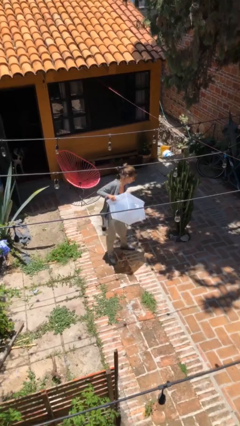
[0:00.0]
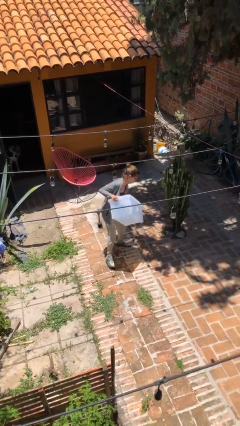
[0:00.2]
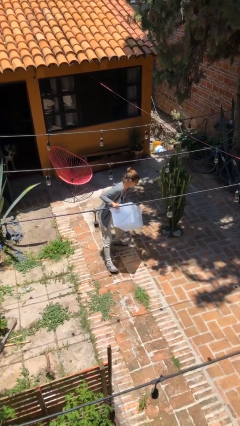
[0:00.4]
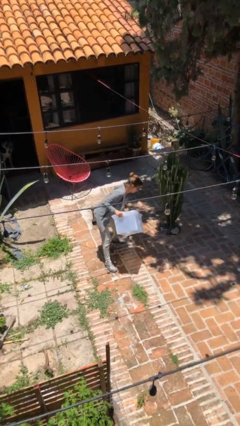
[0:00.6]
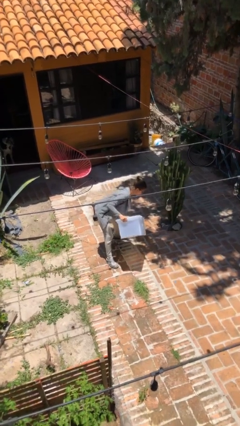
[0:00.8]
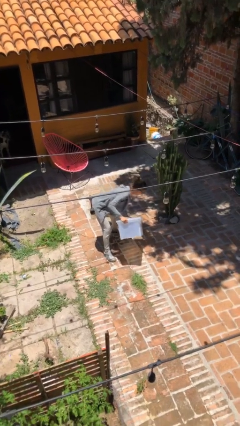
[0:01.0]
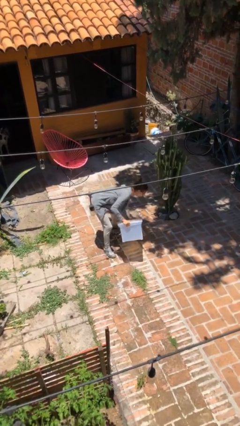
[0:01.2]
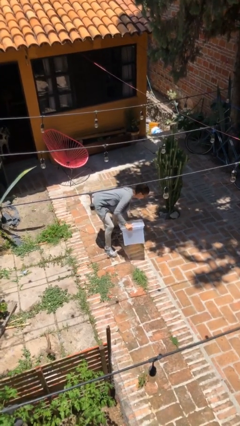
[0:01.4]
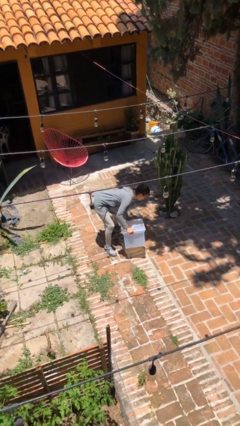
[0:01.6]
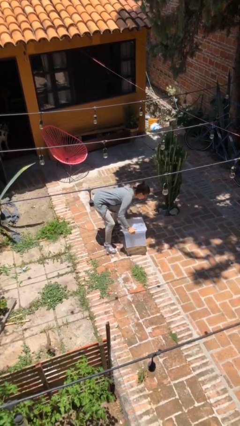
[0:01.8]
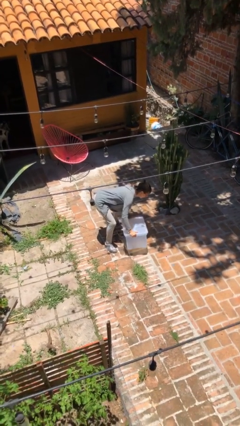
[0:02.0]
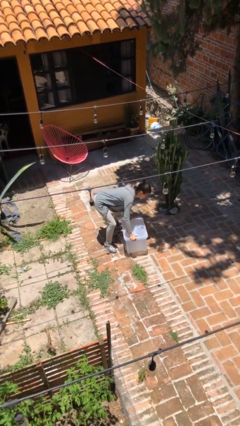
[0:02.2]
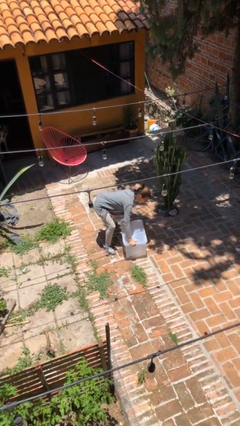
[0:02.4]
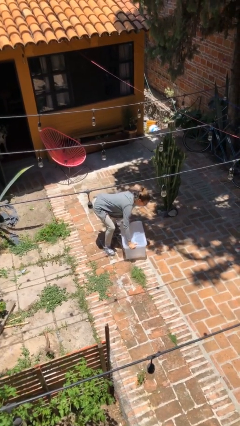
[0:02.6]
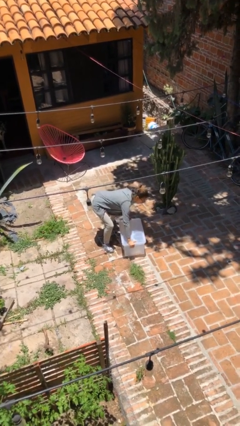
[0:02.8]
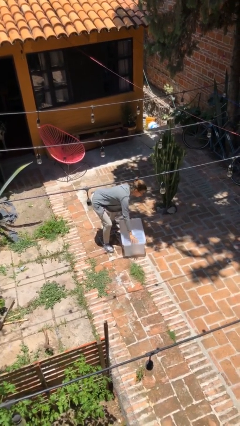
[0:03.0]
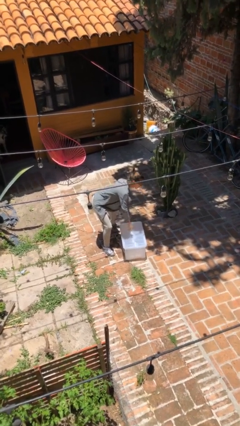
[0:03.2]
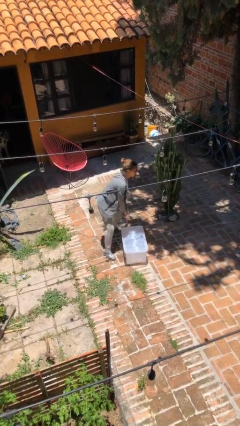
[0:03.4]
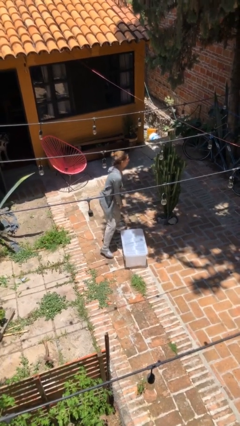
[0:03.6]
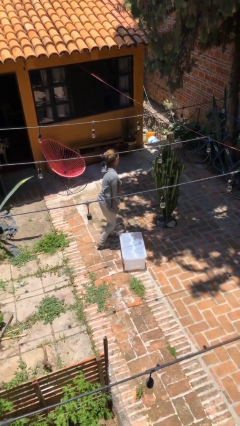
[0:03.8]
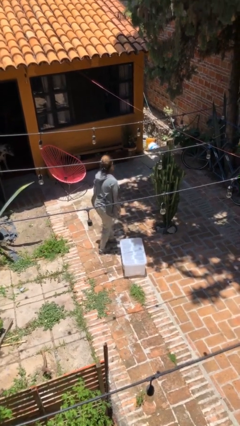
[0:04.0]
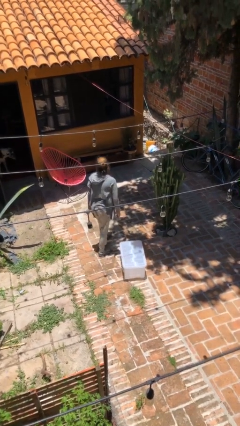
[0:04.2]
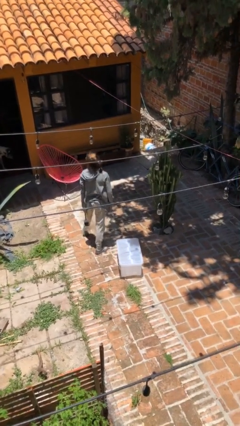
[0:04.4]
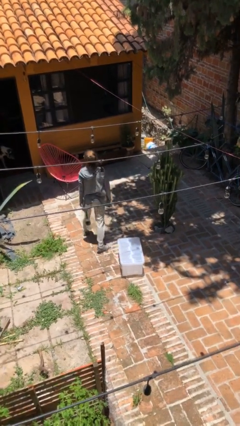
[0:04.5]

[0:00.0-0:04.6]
person puts down object on floor

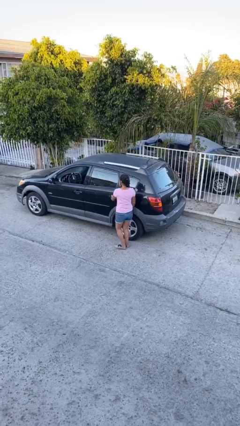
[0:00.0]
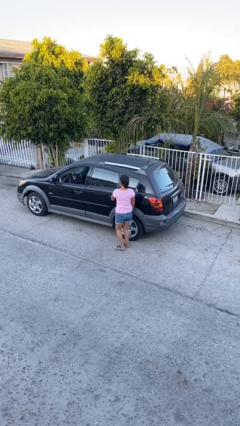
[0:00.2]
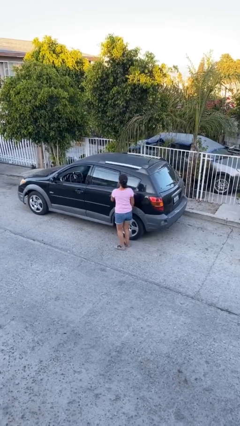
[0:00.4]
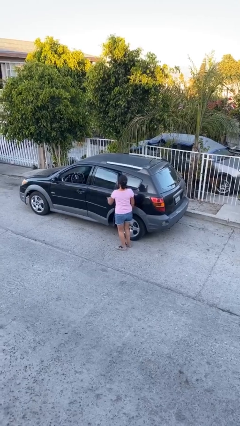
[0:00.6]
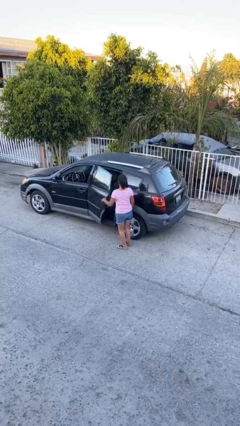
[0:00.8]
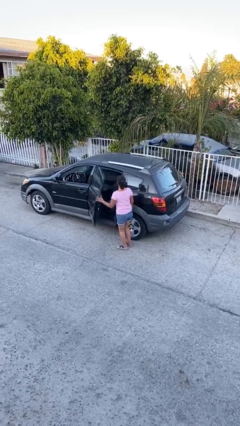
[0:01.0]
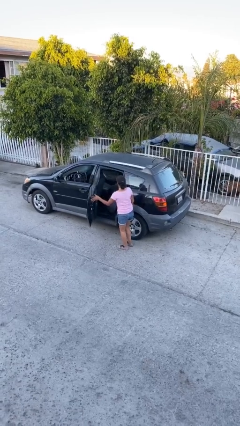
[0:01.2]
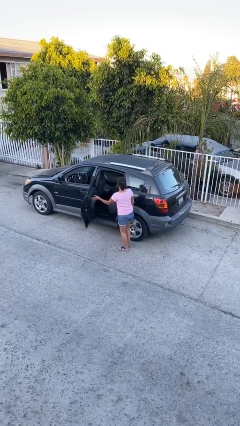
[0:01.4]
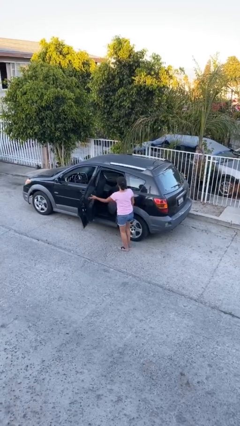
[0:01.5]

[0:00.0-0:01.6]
person opens car door

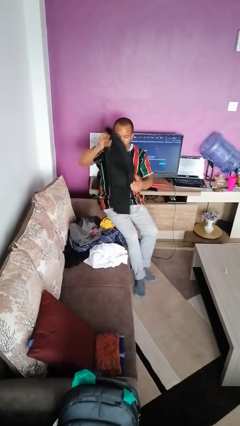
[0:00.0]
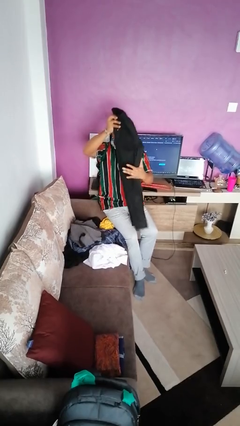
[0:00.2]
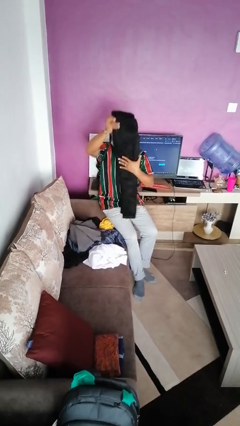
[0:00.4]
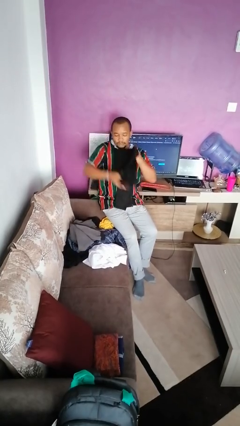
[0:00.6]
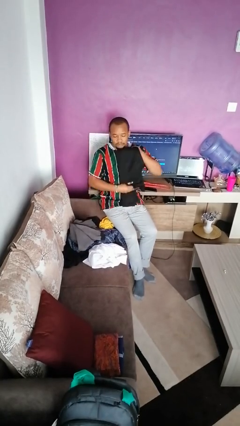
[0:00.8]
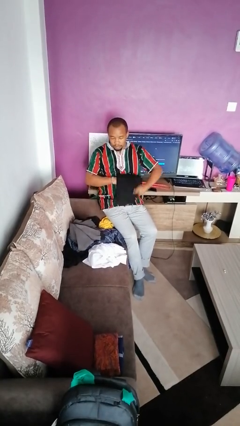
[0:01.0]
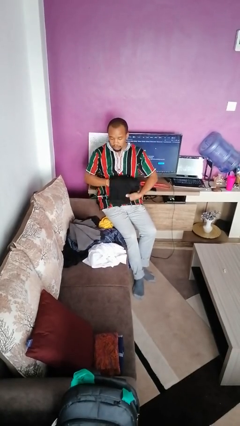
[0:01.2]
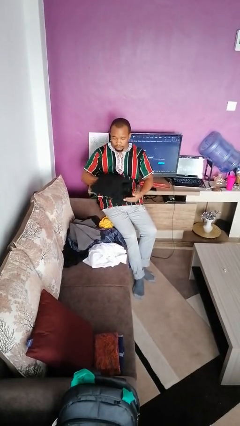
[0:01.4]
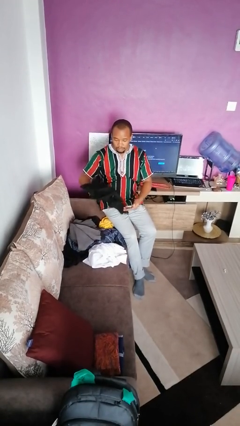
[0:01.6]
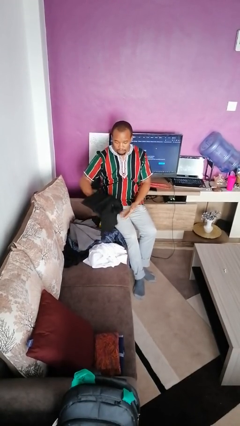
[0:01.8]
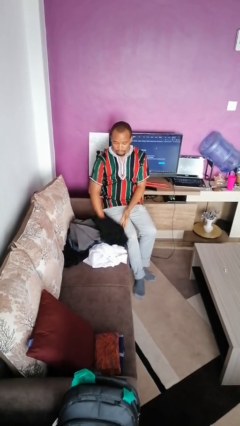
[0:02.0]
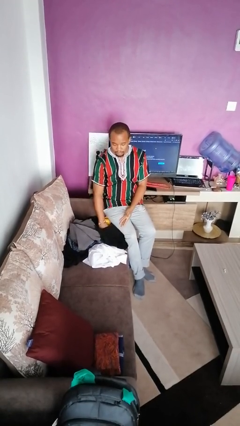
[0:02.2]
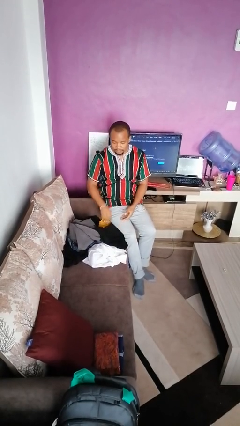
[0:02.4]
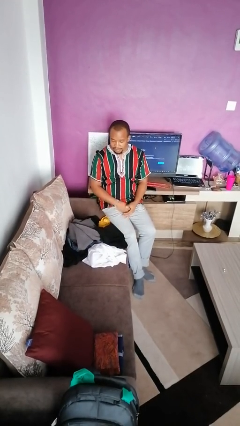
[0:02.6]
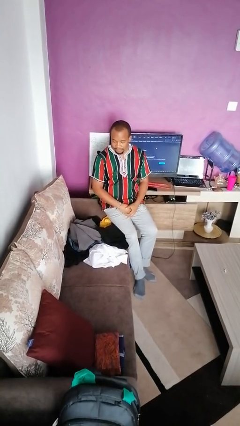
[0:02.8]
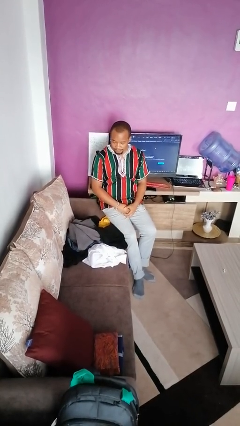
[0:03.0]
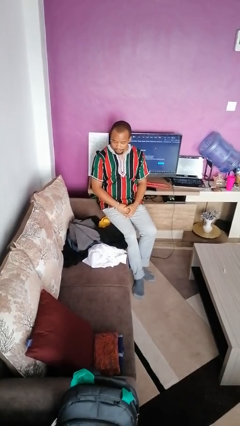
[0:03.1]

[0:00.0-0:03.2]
person folds pants

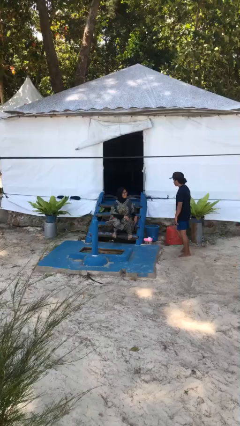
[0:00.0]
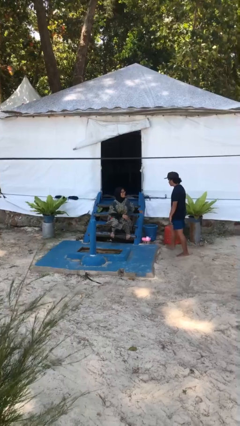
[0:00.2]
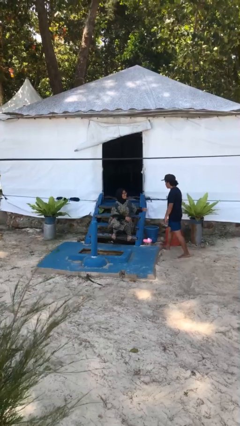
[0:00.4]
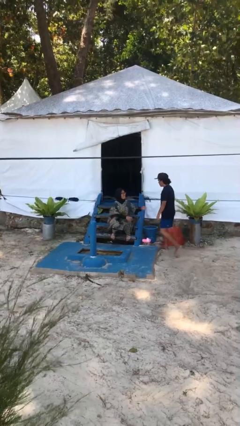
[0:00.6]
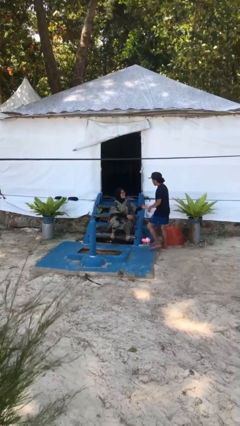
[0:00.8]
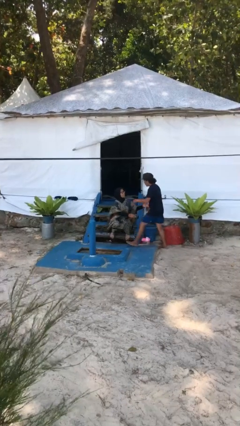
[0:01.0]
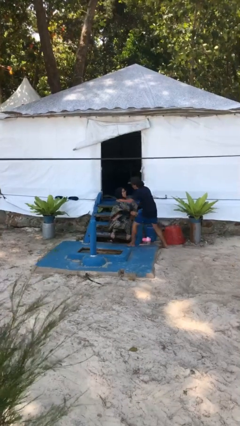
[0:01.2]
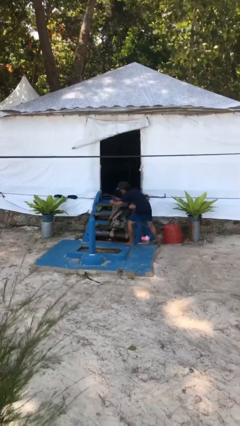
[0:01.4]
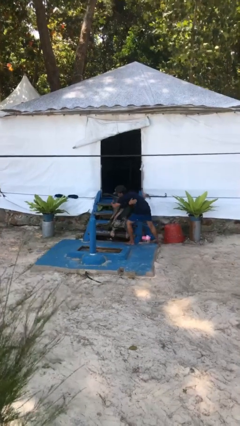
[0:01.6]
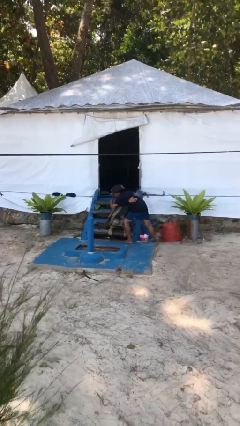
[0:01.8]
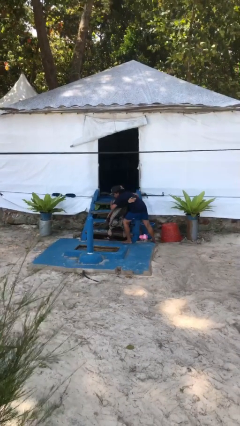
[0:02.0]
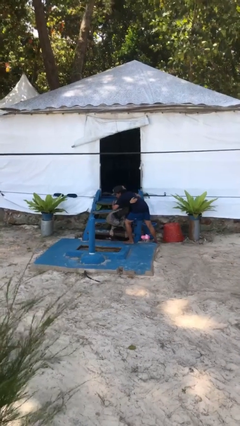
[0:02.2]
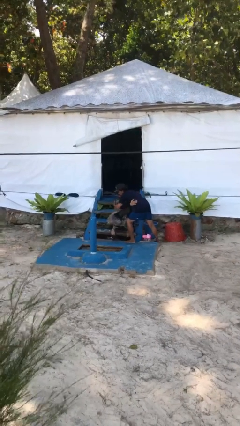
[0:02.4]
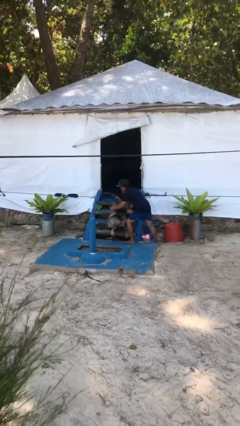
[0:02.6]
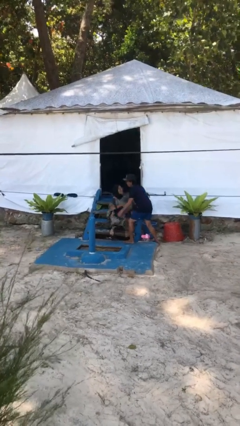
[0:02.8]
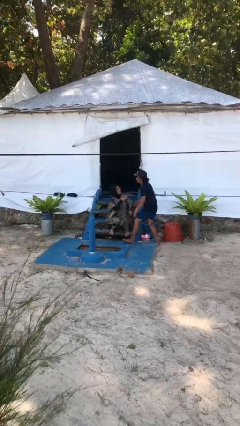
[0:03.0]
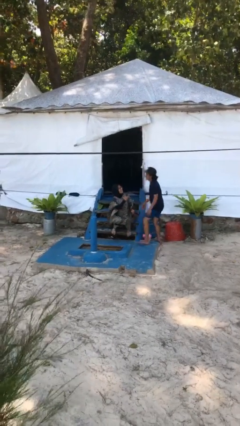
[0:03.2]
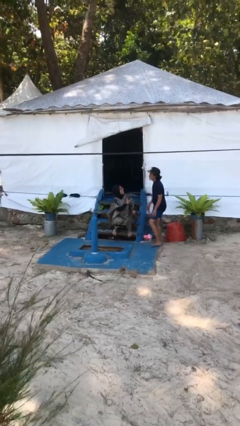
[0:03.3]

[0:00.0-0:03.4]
person embraces person

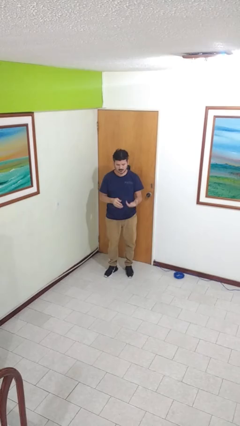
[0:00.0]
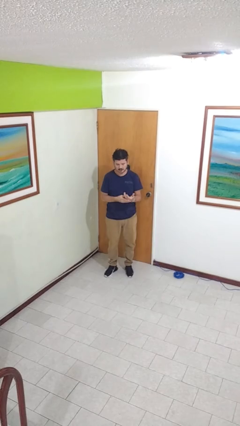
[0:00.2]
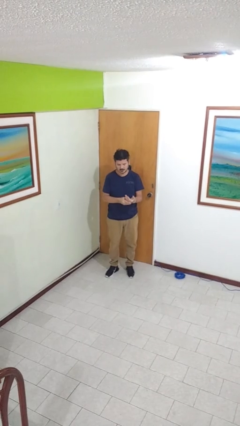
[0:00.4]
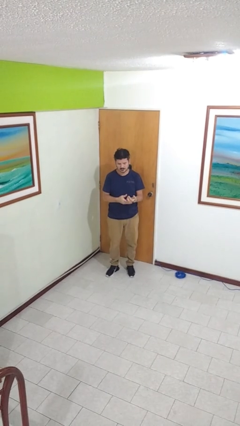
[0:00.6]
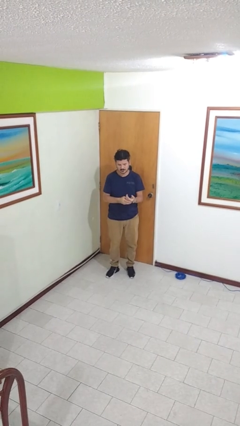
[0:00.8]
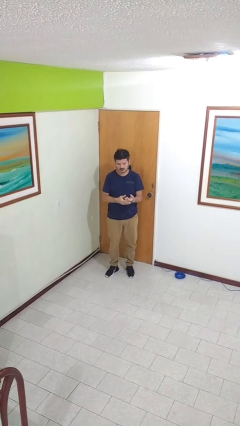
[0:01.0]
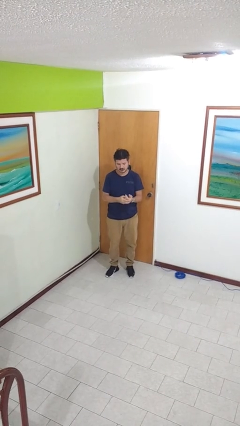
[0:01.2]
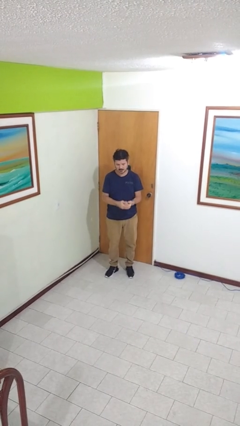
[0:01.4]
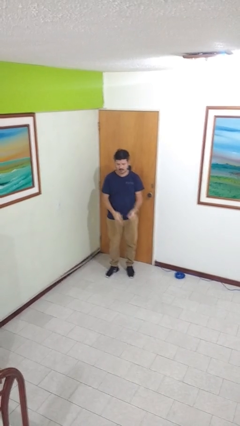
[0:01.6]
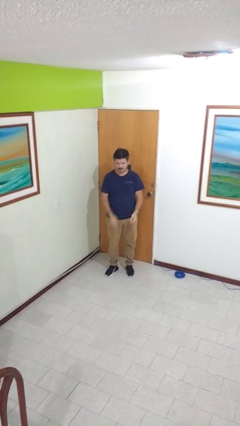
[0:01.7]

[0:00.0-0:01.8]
person cracks knuckles

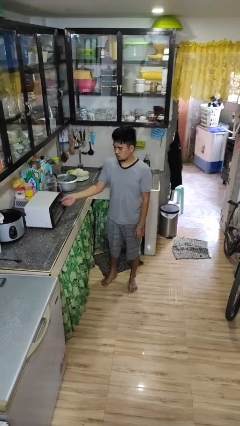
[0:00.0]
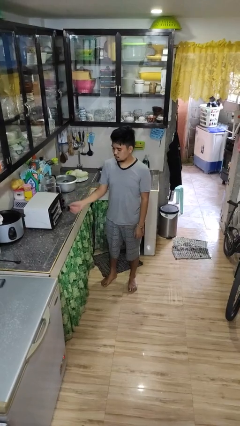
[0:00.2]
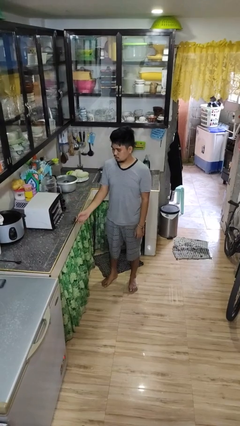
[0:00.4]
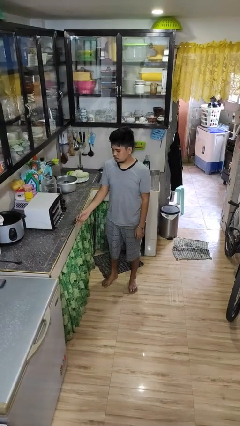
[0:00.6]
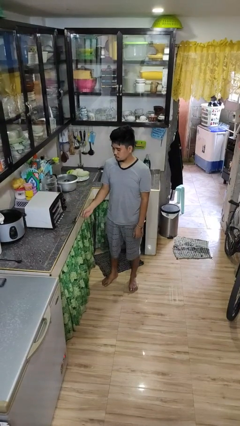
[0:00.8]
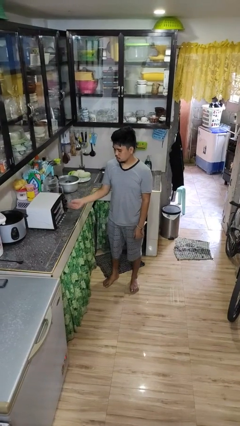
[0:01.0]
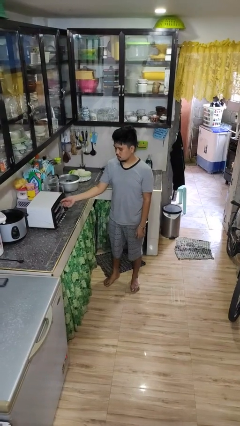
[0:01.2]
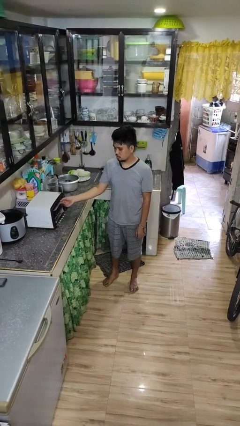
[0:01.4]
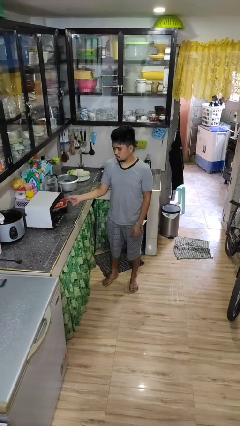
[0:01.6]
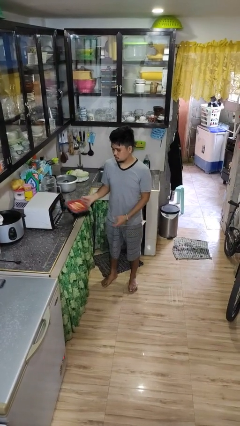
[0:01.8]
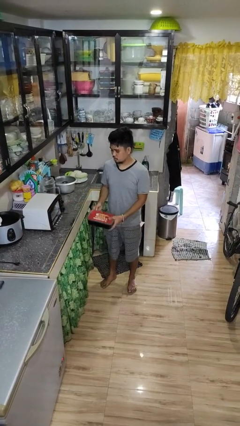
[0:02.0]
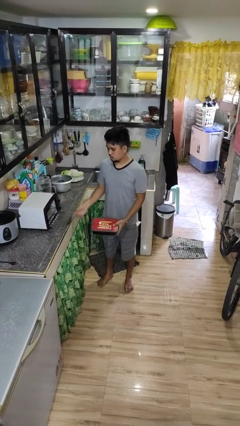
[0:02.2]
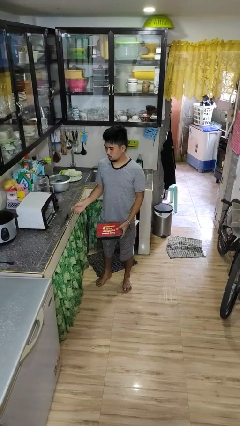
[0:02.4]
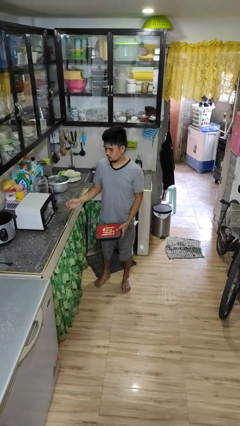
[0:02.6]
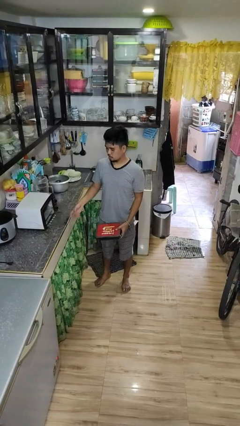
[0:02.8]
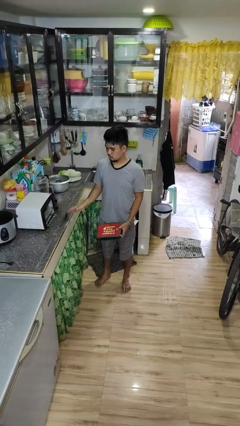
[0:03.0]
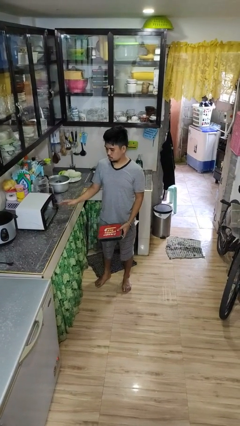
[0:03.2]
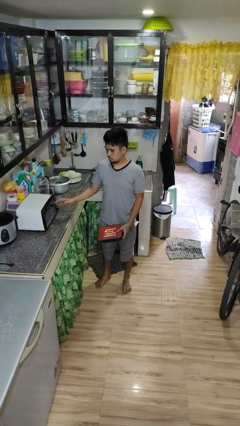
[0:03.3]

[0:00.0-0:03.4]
person takes object from microwave
